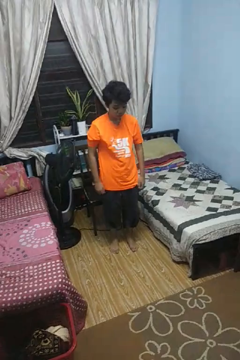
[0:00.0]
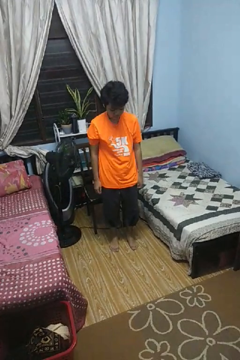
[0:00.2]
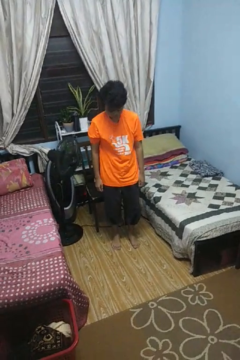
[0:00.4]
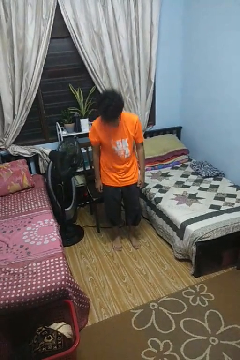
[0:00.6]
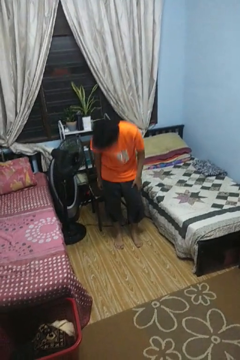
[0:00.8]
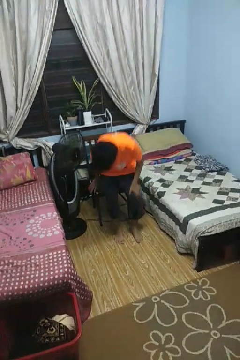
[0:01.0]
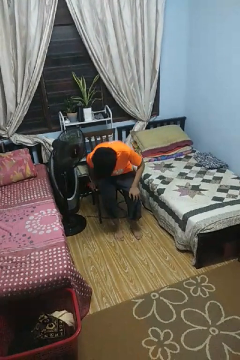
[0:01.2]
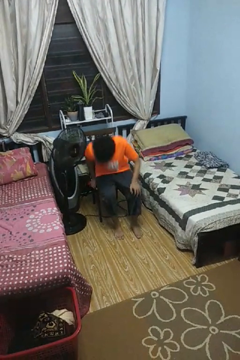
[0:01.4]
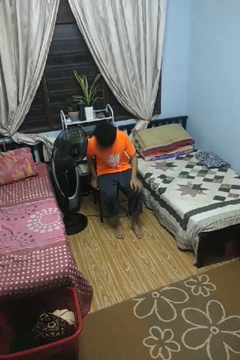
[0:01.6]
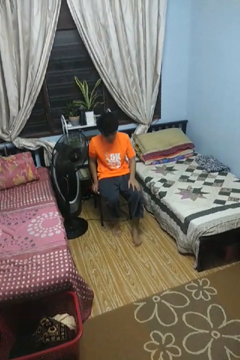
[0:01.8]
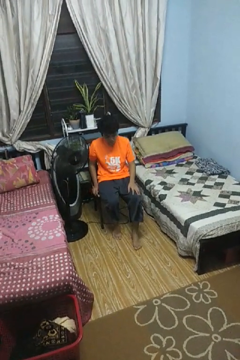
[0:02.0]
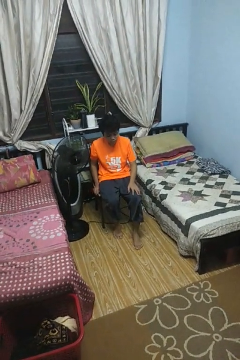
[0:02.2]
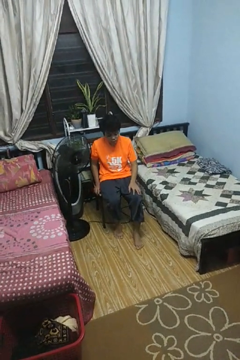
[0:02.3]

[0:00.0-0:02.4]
person sits down

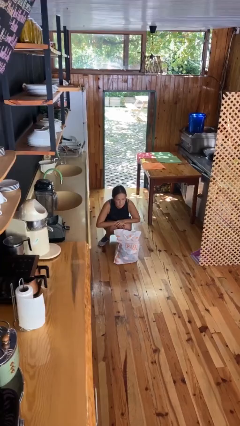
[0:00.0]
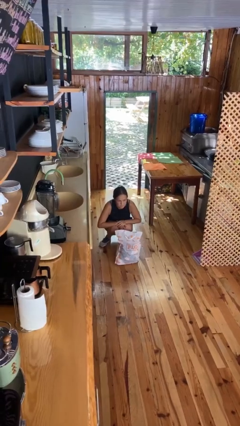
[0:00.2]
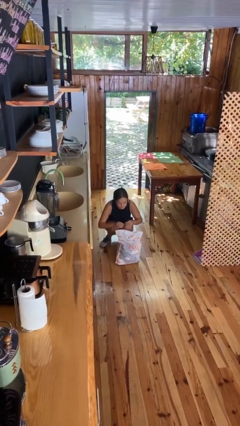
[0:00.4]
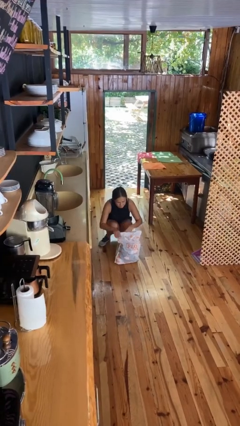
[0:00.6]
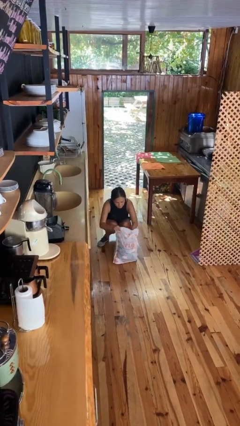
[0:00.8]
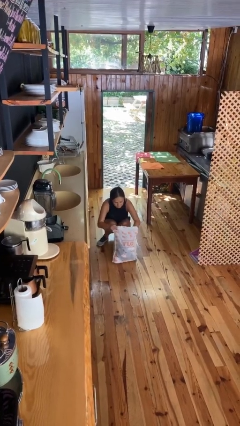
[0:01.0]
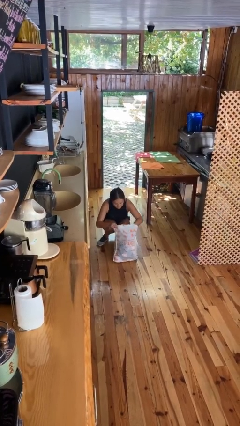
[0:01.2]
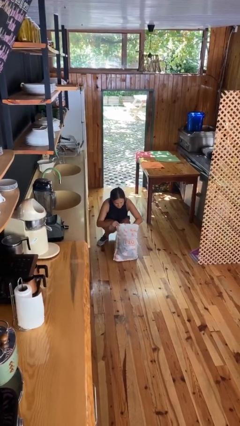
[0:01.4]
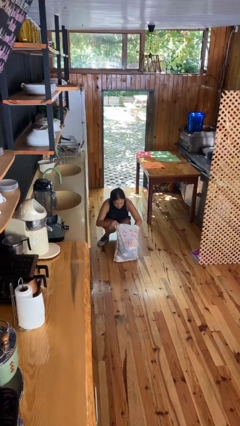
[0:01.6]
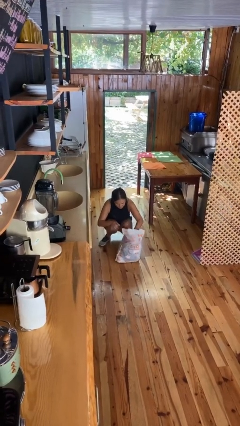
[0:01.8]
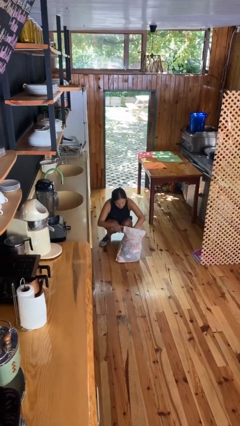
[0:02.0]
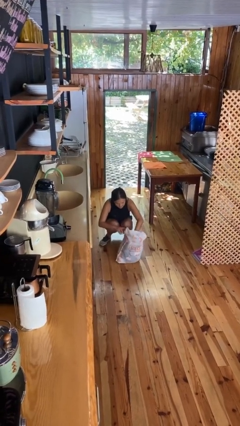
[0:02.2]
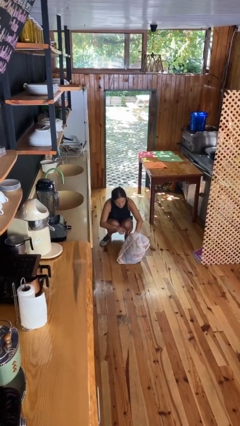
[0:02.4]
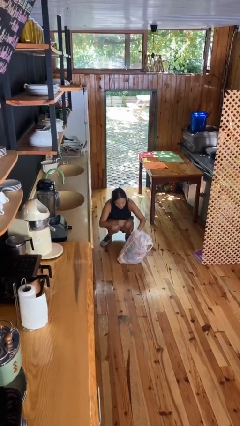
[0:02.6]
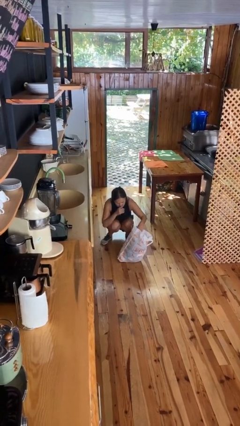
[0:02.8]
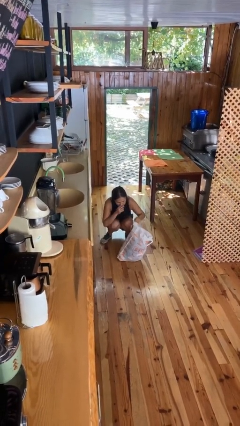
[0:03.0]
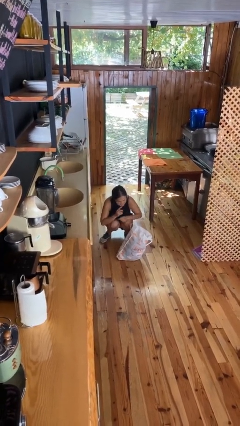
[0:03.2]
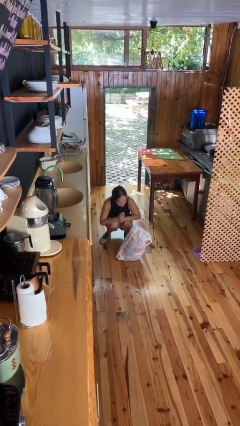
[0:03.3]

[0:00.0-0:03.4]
person searches in bag

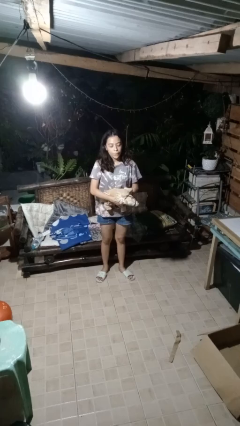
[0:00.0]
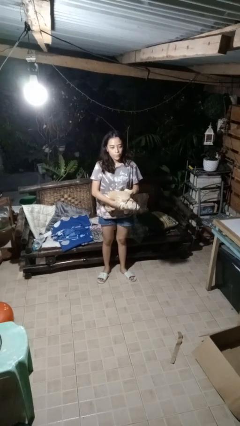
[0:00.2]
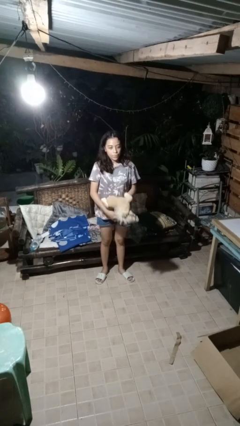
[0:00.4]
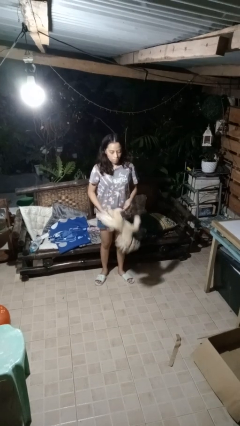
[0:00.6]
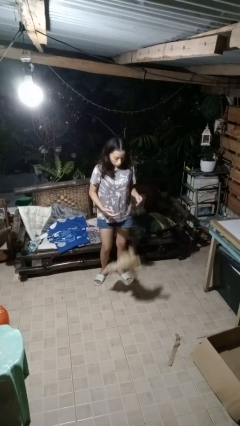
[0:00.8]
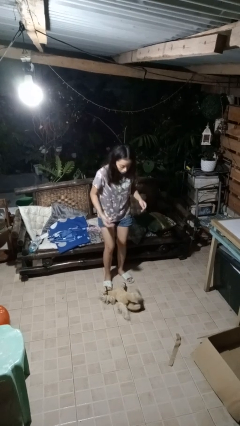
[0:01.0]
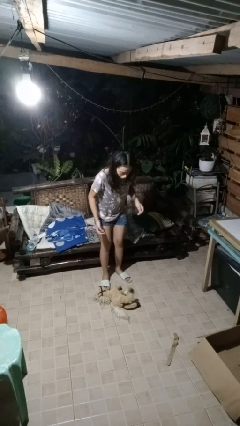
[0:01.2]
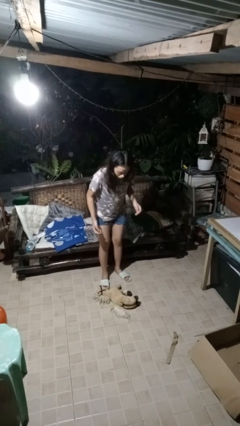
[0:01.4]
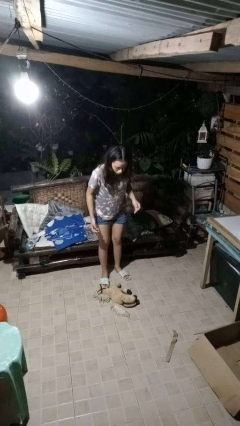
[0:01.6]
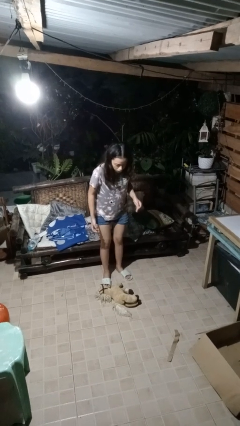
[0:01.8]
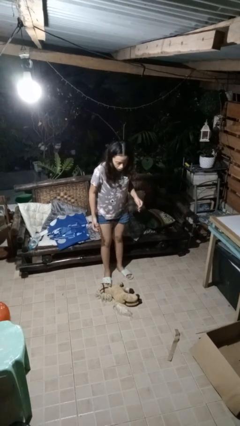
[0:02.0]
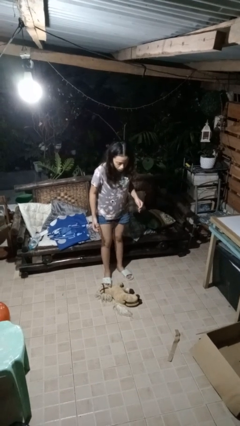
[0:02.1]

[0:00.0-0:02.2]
person drops object

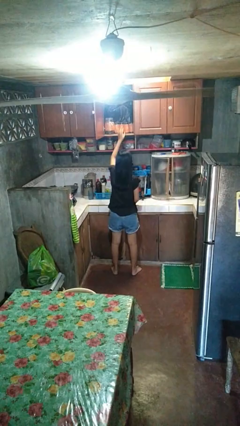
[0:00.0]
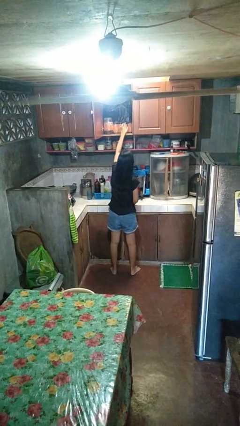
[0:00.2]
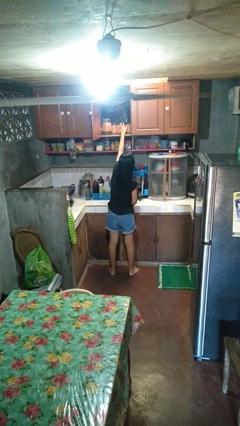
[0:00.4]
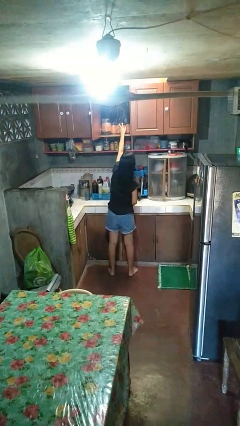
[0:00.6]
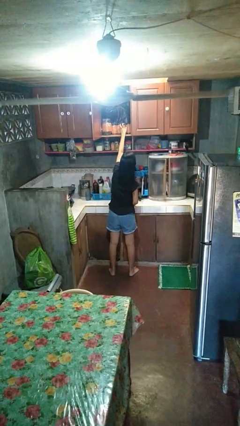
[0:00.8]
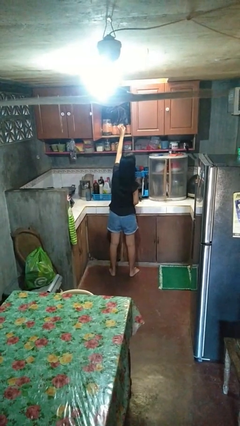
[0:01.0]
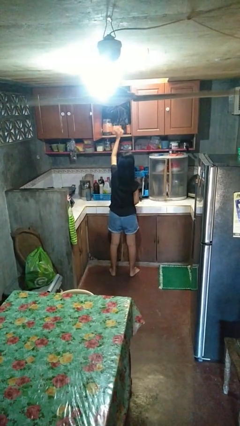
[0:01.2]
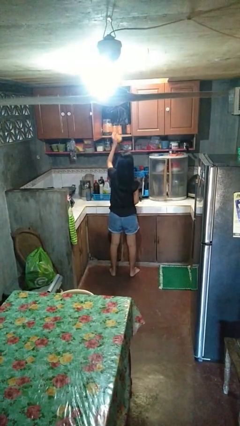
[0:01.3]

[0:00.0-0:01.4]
person picks up object from cabinet

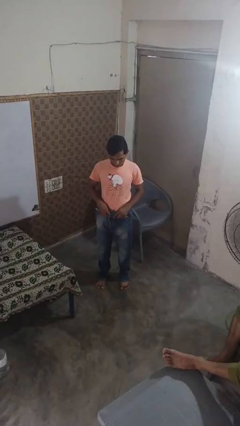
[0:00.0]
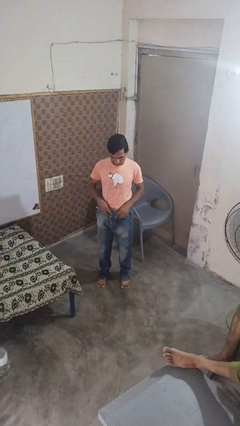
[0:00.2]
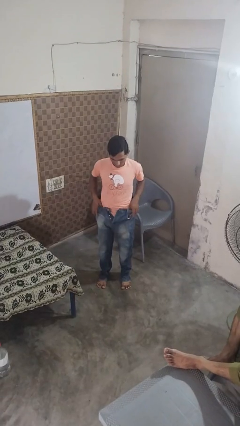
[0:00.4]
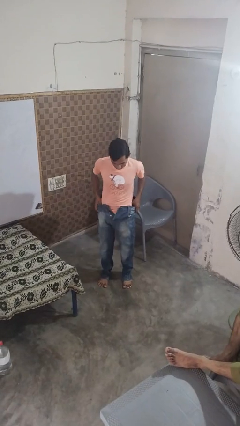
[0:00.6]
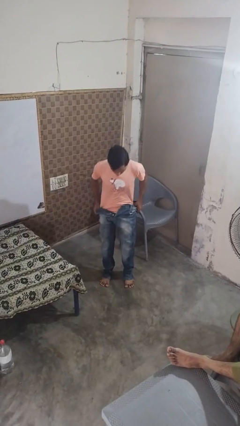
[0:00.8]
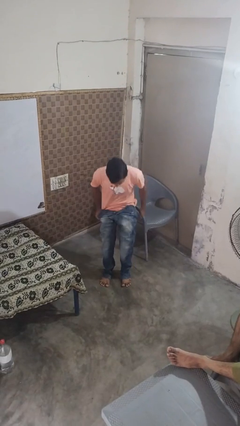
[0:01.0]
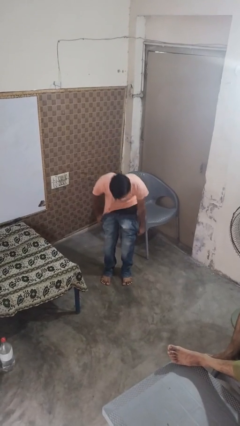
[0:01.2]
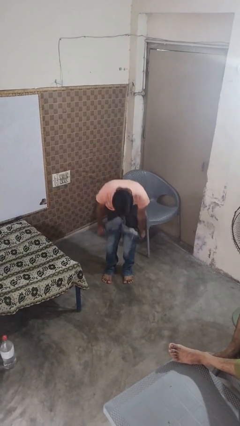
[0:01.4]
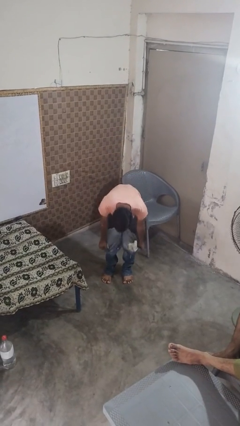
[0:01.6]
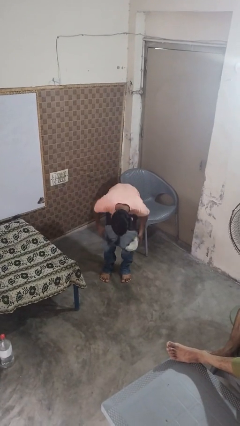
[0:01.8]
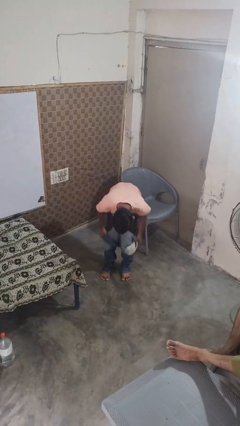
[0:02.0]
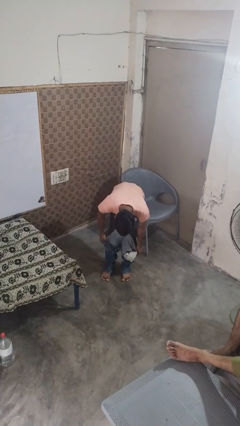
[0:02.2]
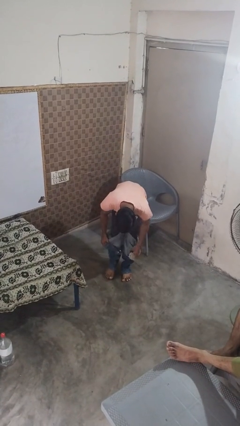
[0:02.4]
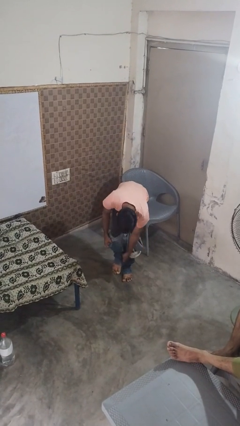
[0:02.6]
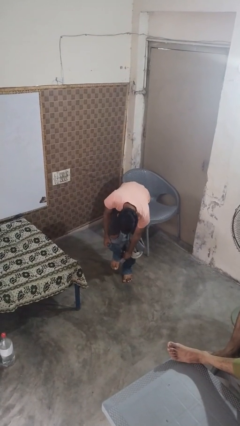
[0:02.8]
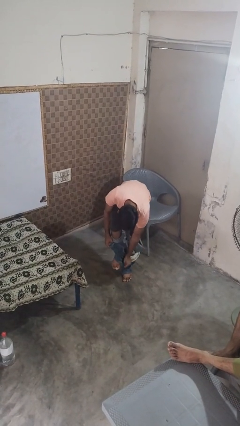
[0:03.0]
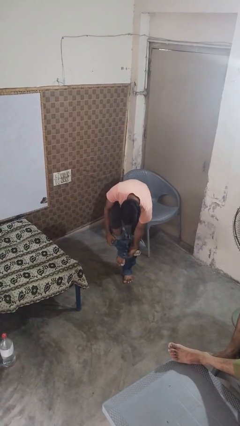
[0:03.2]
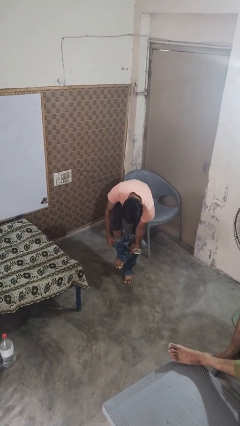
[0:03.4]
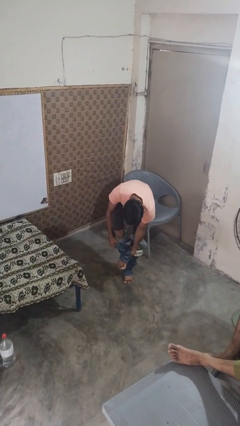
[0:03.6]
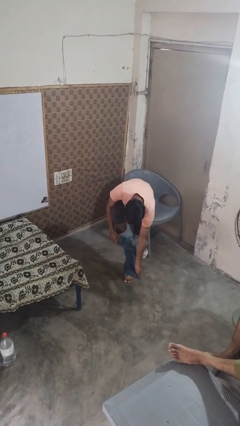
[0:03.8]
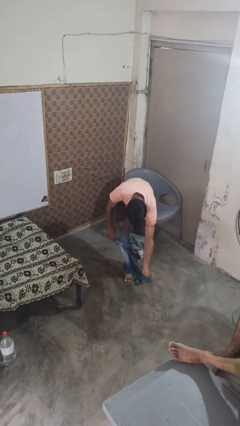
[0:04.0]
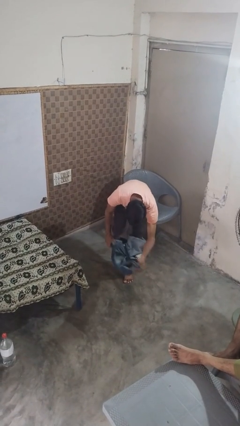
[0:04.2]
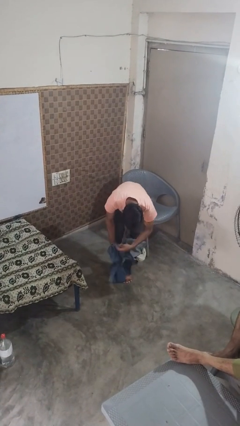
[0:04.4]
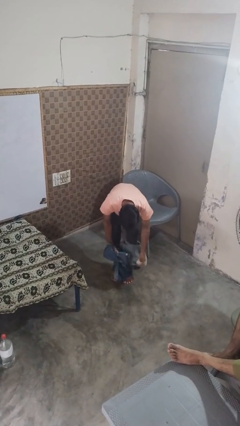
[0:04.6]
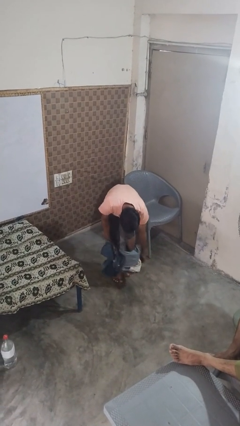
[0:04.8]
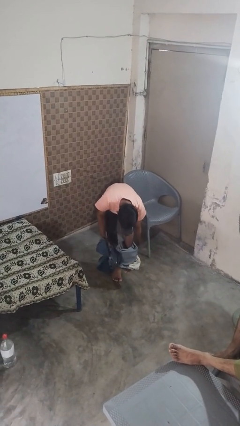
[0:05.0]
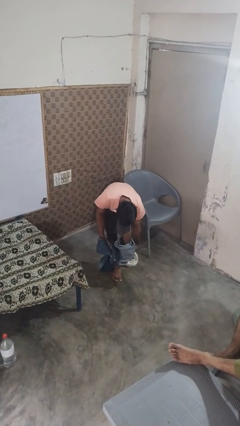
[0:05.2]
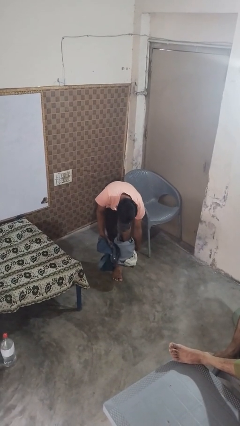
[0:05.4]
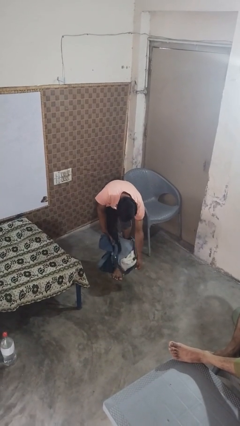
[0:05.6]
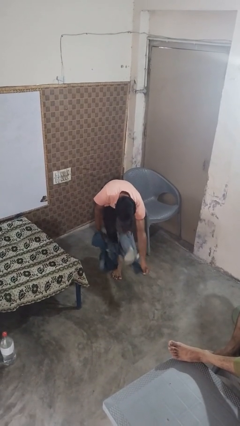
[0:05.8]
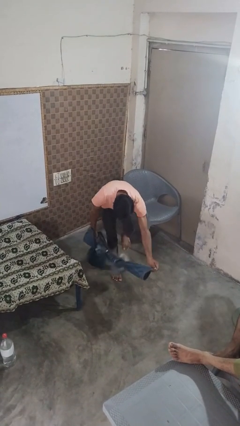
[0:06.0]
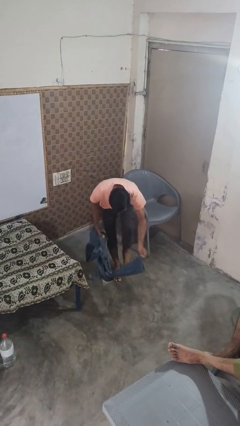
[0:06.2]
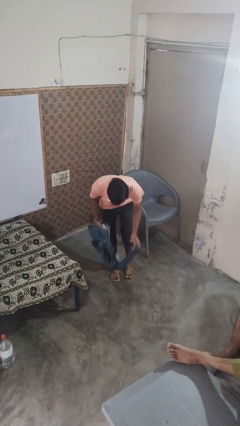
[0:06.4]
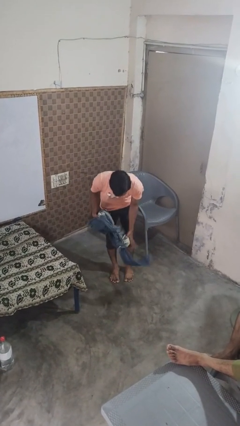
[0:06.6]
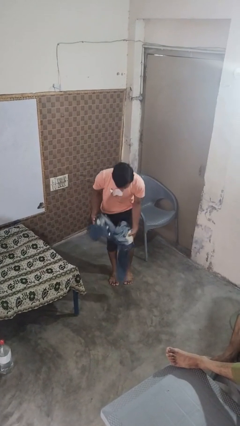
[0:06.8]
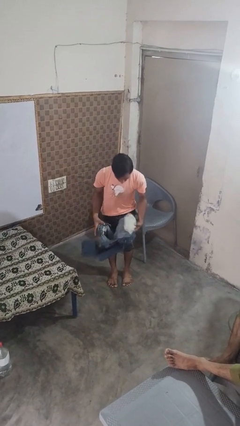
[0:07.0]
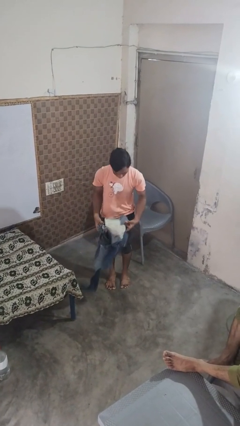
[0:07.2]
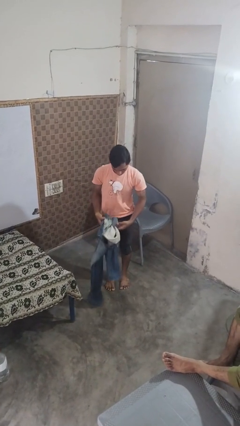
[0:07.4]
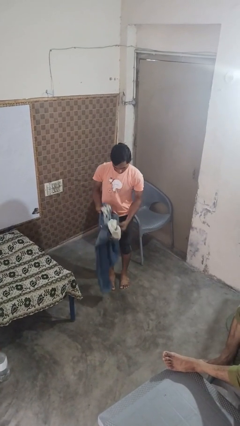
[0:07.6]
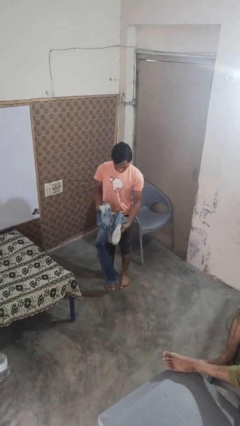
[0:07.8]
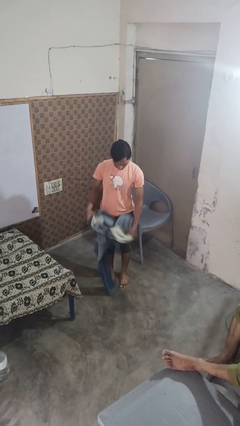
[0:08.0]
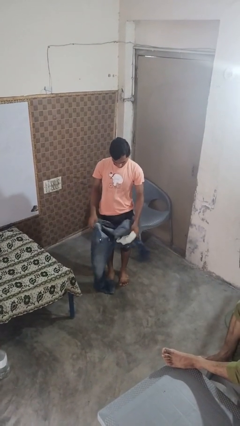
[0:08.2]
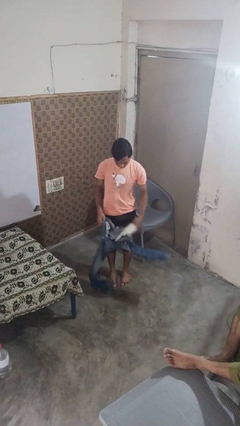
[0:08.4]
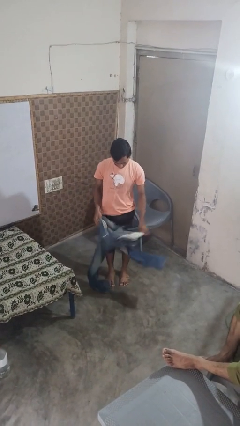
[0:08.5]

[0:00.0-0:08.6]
person takes off pants
